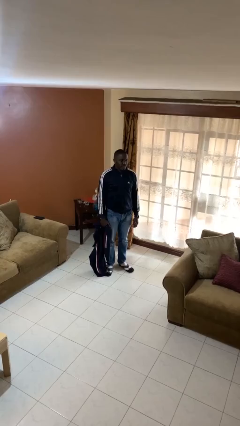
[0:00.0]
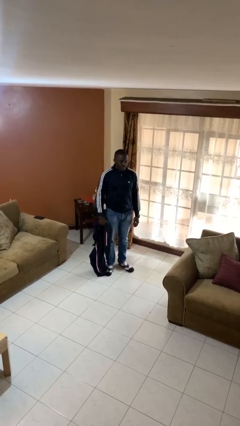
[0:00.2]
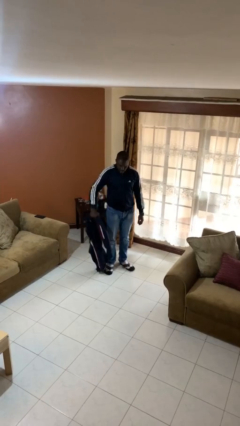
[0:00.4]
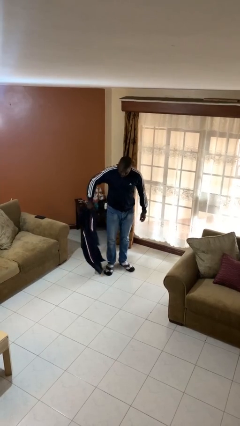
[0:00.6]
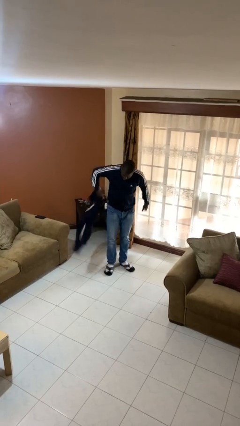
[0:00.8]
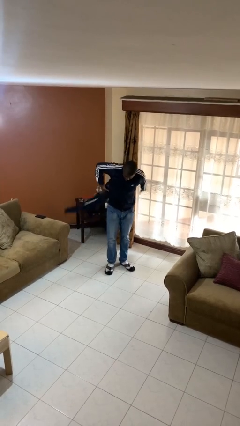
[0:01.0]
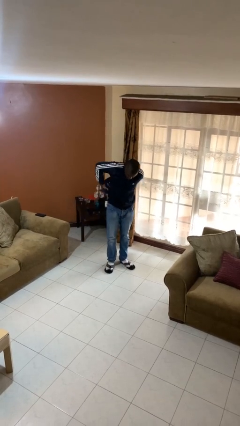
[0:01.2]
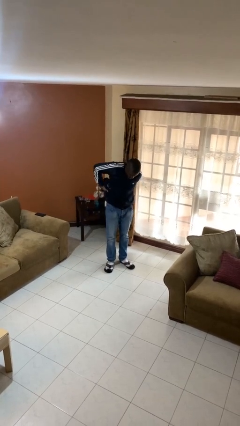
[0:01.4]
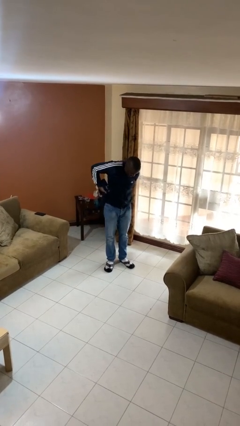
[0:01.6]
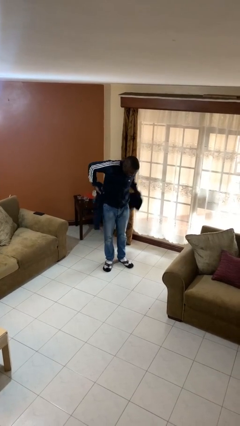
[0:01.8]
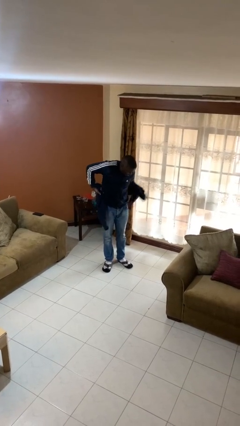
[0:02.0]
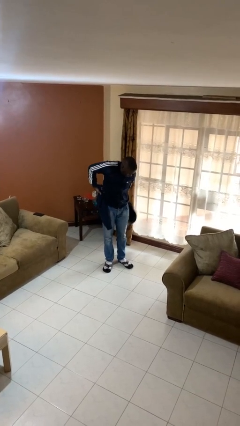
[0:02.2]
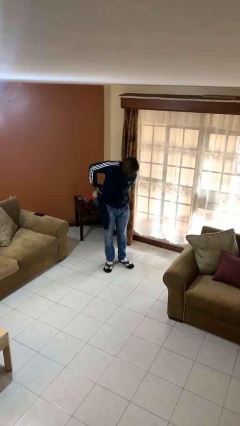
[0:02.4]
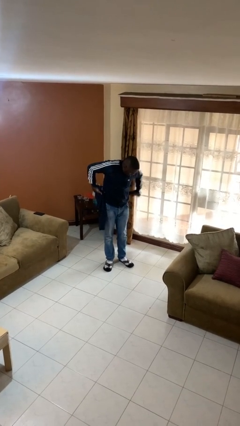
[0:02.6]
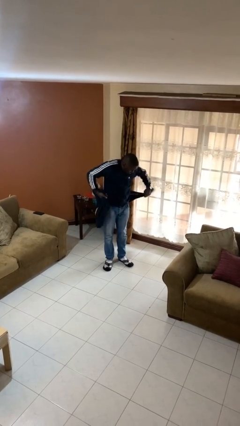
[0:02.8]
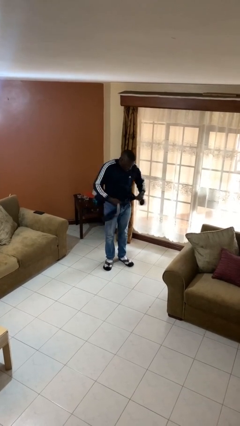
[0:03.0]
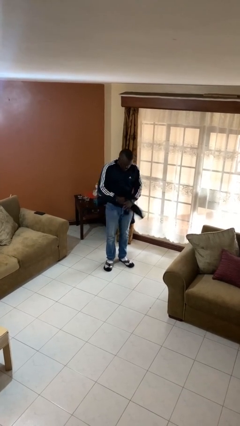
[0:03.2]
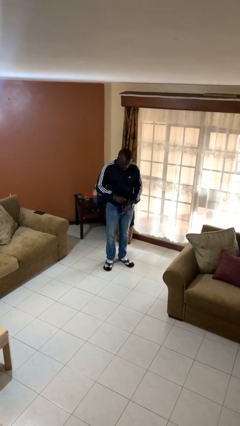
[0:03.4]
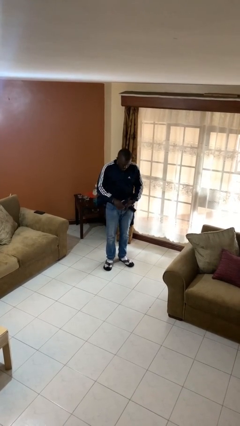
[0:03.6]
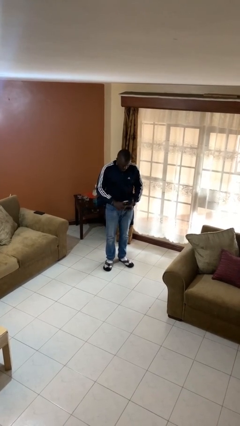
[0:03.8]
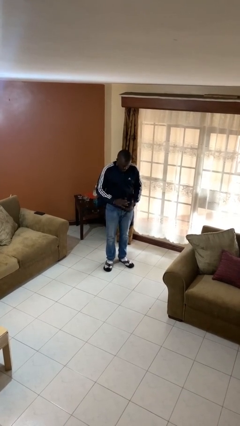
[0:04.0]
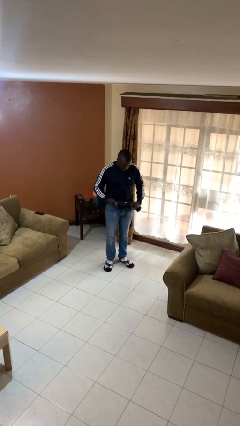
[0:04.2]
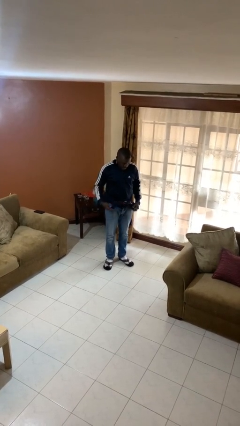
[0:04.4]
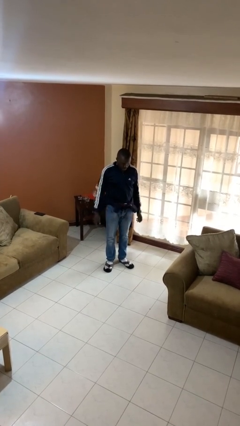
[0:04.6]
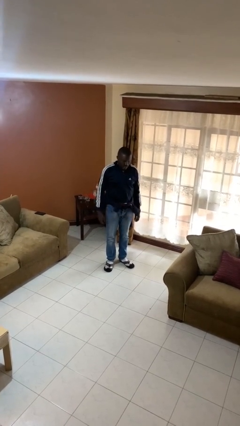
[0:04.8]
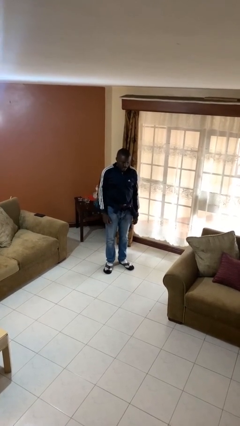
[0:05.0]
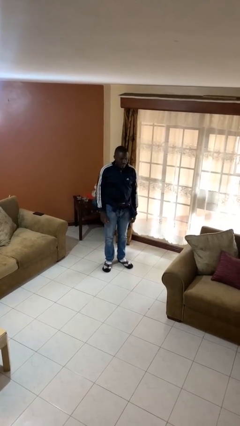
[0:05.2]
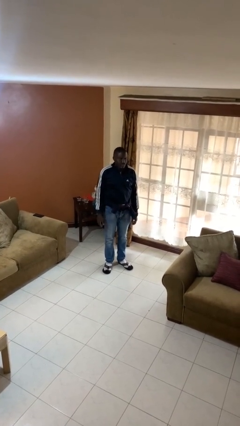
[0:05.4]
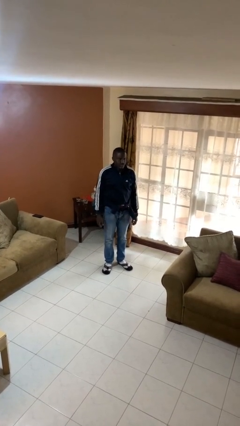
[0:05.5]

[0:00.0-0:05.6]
person ties jacket around waist

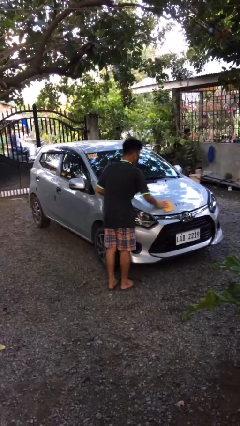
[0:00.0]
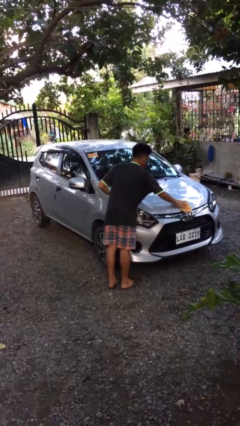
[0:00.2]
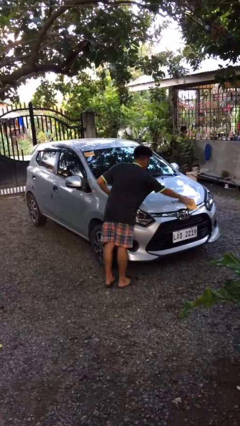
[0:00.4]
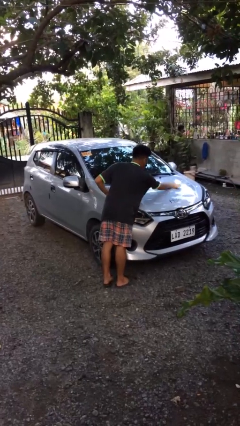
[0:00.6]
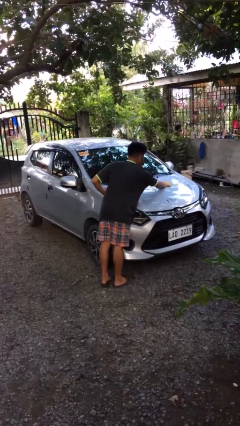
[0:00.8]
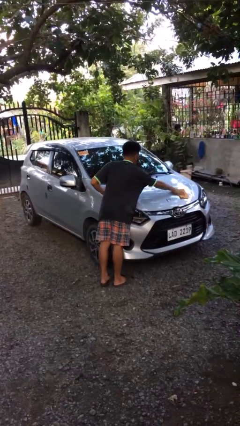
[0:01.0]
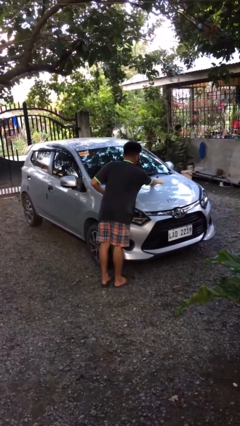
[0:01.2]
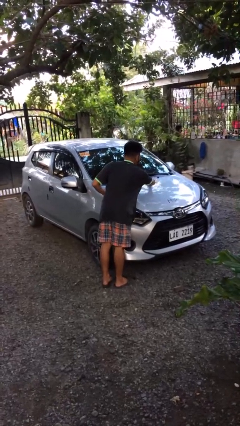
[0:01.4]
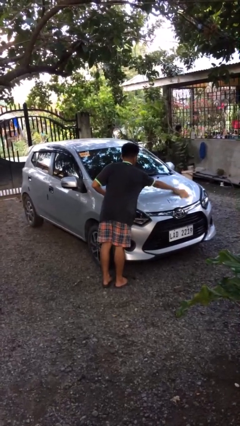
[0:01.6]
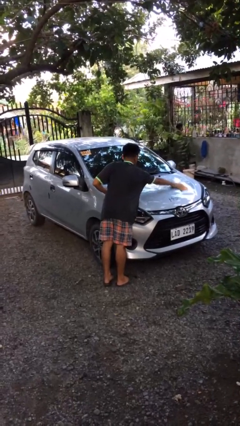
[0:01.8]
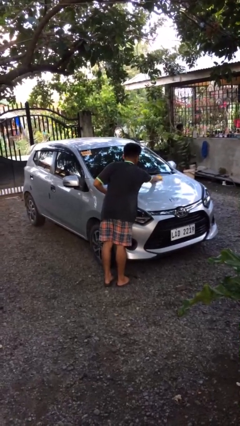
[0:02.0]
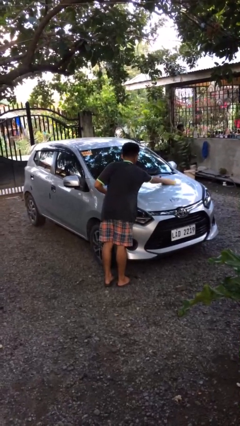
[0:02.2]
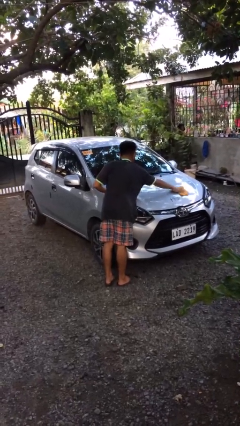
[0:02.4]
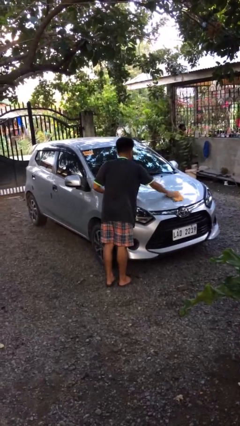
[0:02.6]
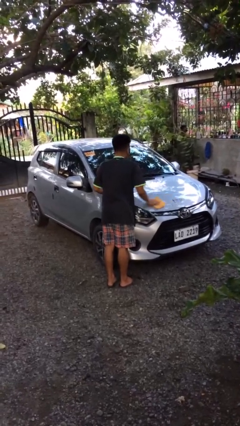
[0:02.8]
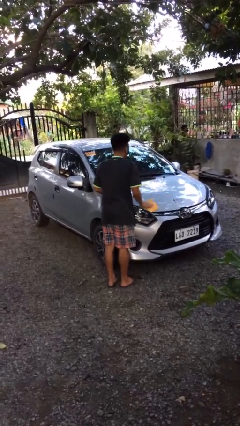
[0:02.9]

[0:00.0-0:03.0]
person polishes car with rag

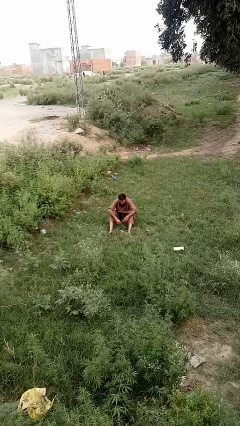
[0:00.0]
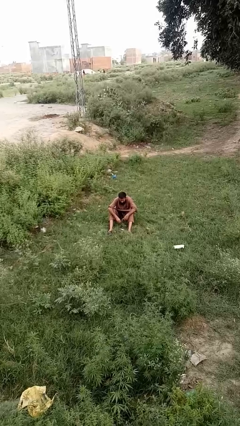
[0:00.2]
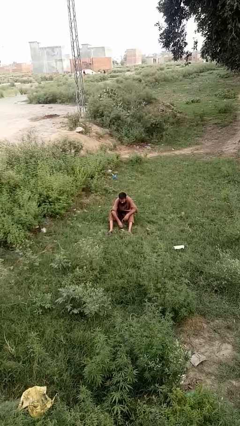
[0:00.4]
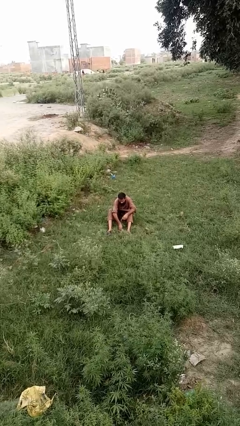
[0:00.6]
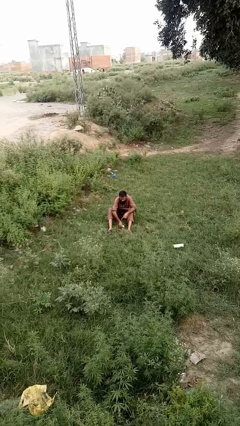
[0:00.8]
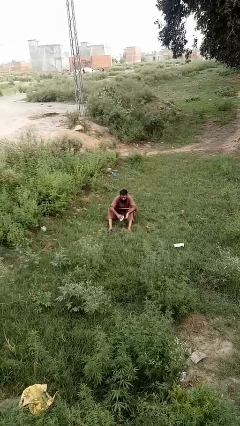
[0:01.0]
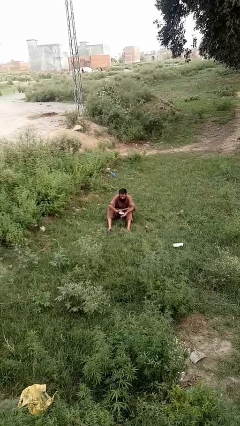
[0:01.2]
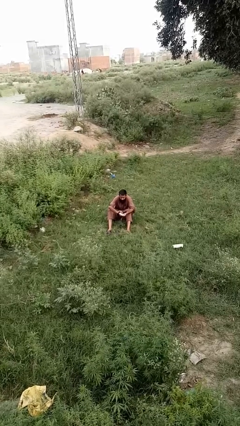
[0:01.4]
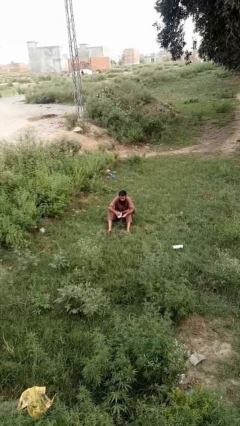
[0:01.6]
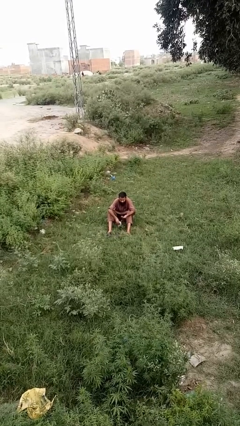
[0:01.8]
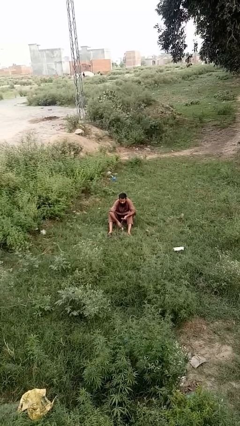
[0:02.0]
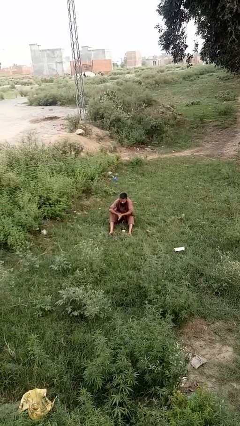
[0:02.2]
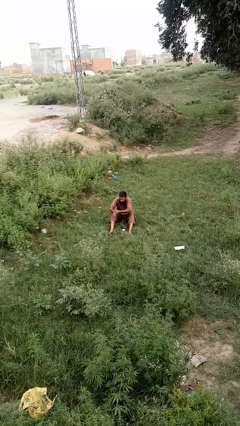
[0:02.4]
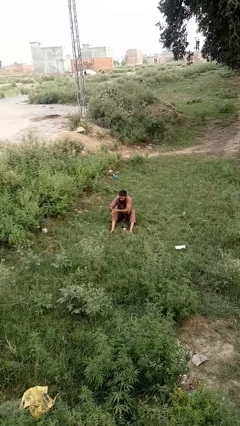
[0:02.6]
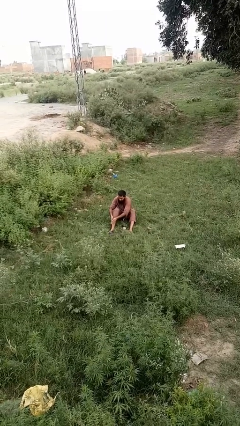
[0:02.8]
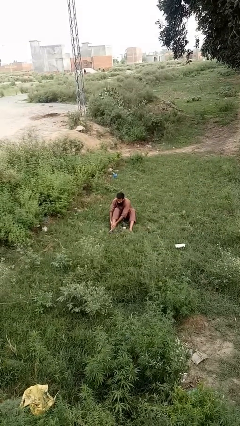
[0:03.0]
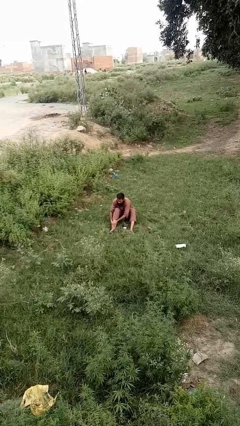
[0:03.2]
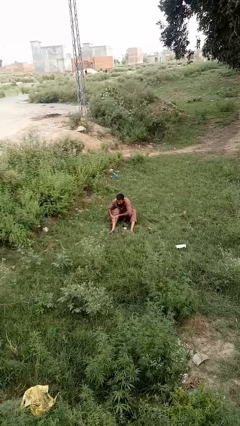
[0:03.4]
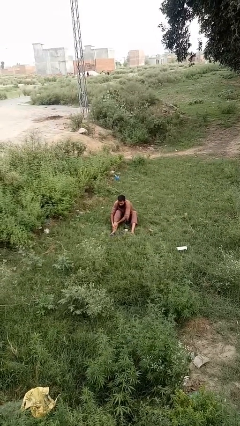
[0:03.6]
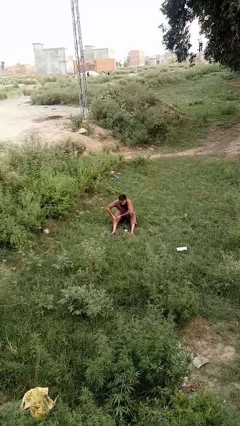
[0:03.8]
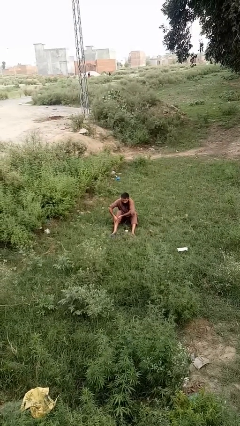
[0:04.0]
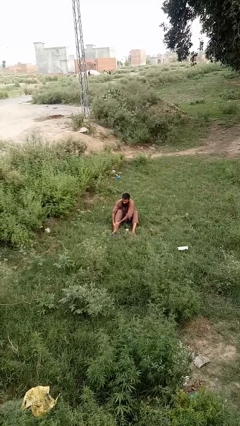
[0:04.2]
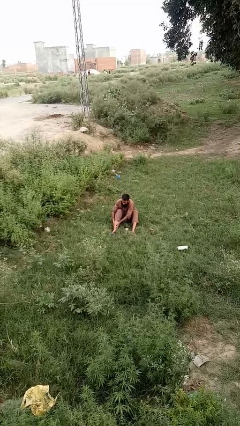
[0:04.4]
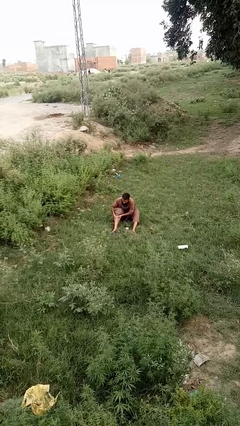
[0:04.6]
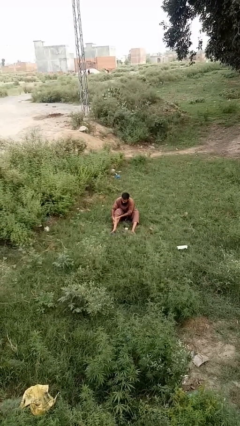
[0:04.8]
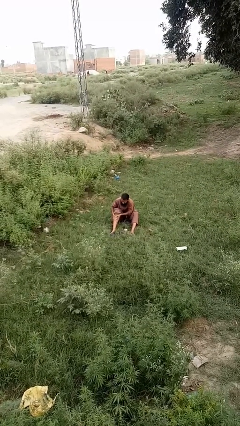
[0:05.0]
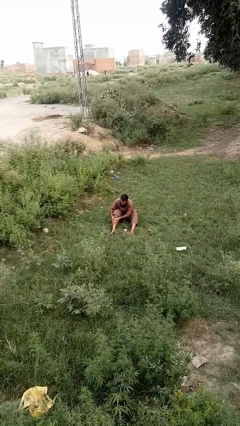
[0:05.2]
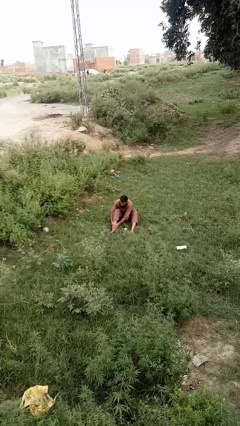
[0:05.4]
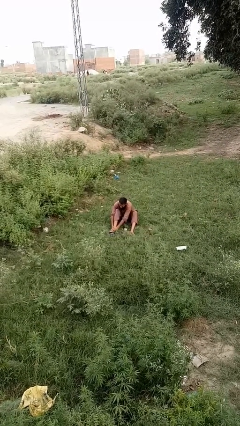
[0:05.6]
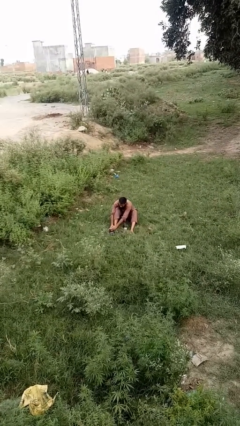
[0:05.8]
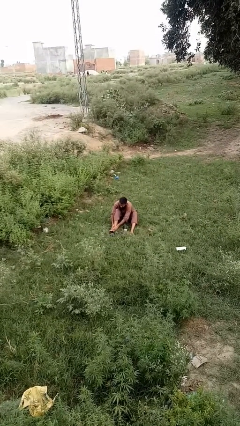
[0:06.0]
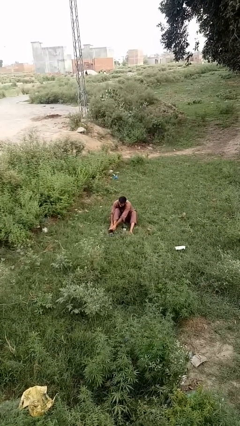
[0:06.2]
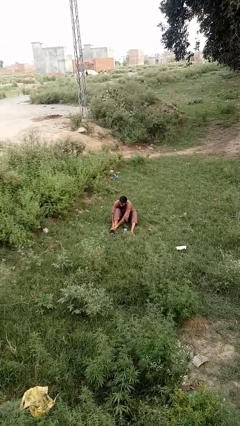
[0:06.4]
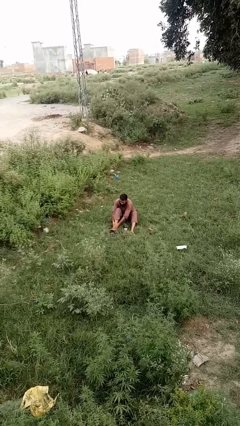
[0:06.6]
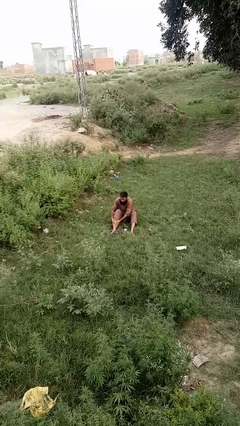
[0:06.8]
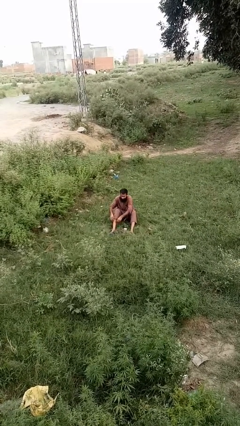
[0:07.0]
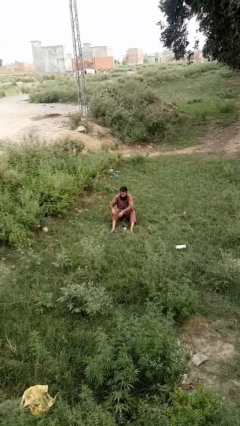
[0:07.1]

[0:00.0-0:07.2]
person applies sunscreen

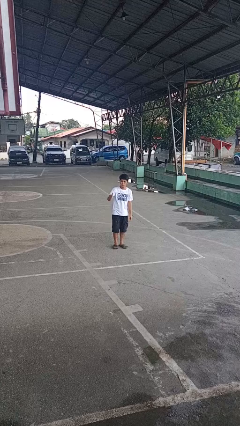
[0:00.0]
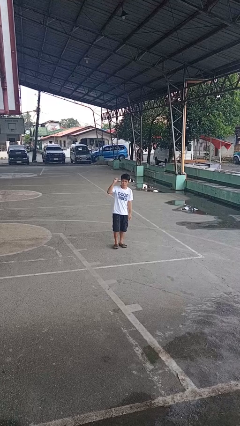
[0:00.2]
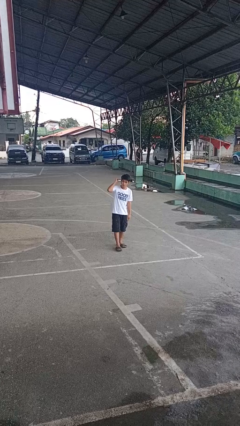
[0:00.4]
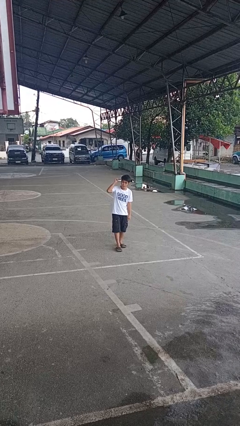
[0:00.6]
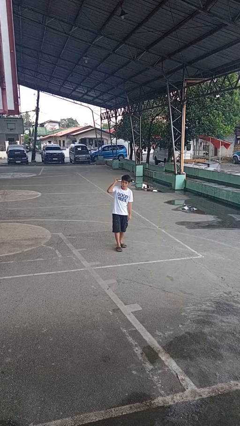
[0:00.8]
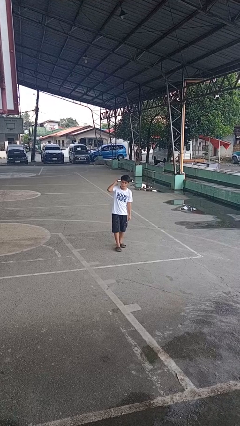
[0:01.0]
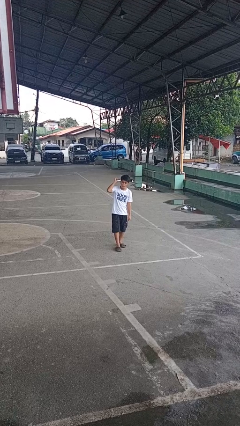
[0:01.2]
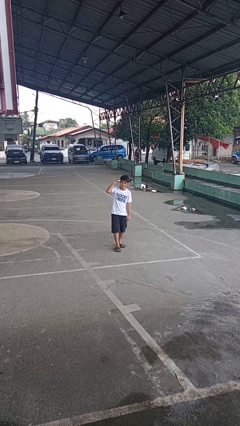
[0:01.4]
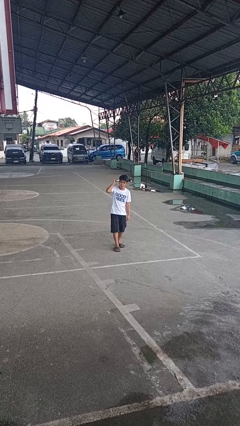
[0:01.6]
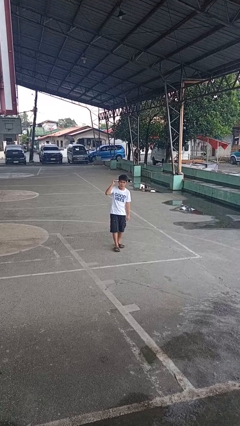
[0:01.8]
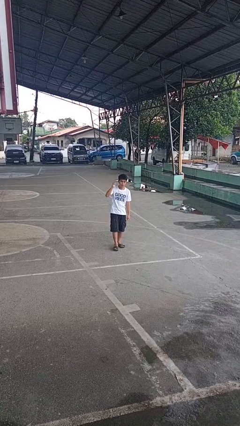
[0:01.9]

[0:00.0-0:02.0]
person gestures behind me
